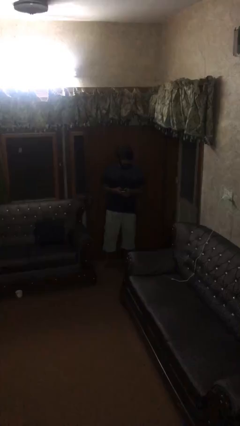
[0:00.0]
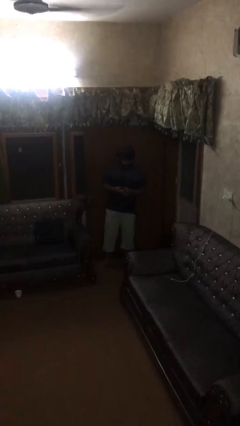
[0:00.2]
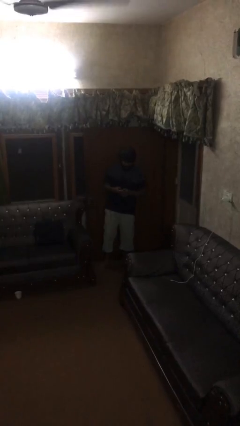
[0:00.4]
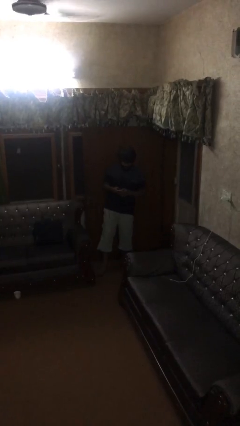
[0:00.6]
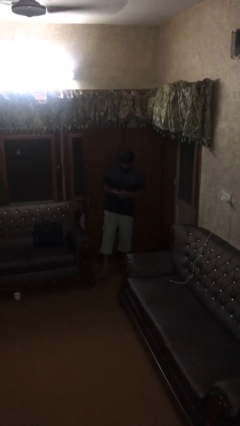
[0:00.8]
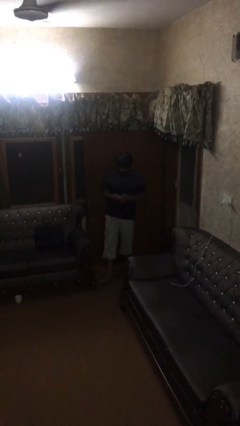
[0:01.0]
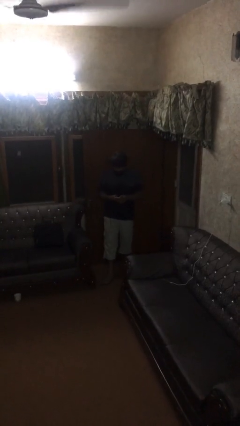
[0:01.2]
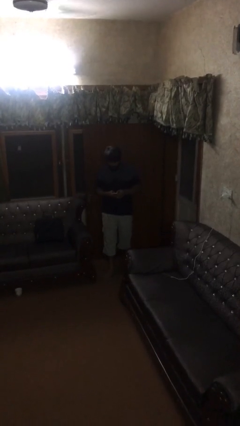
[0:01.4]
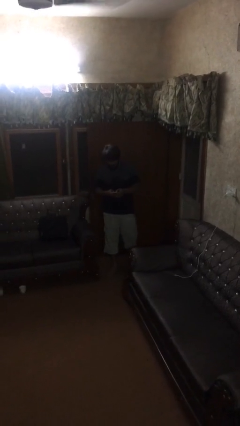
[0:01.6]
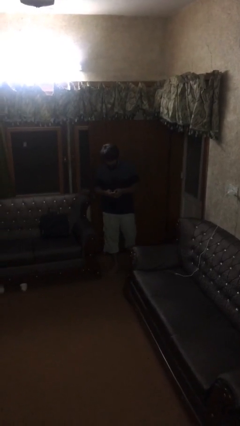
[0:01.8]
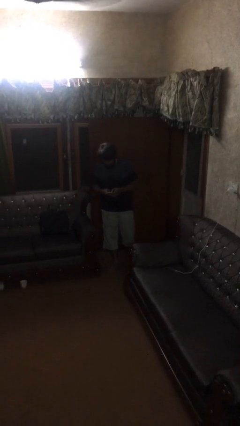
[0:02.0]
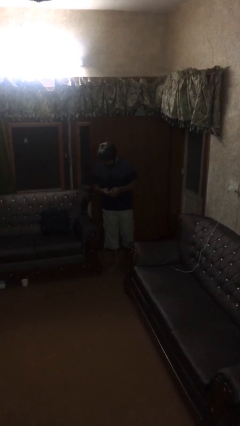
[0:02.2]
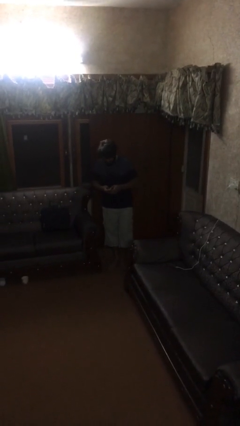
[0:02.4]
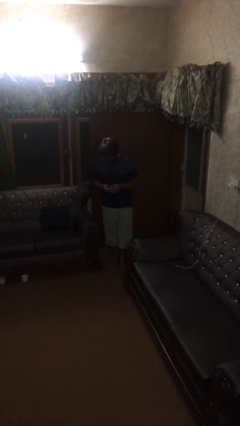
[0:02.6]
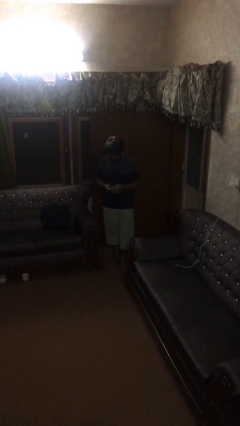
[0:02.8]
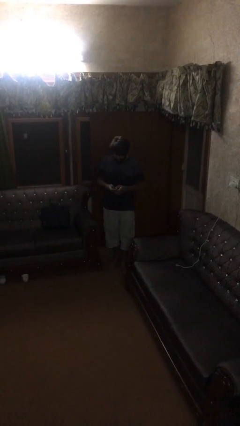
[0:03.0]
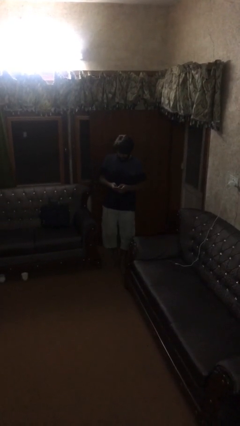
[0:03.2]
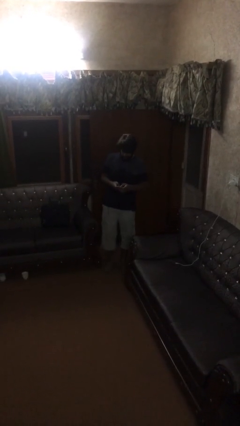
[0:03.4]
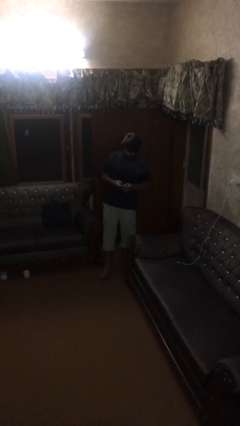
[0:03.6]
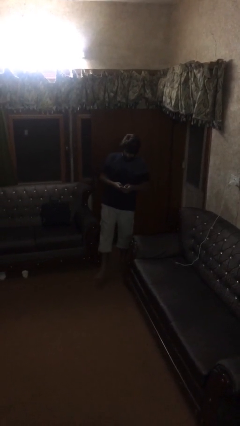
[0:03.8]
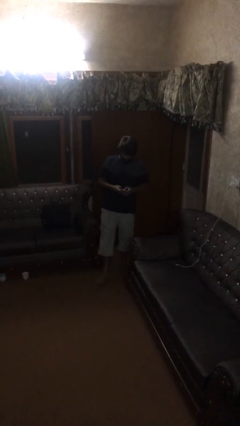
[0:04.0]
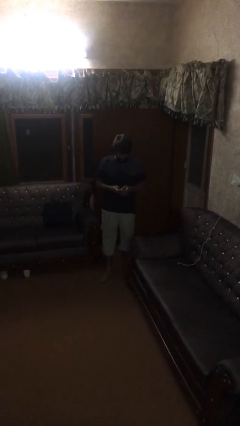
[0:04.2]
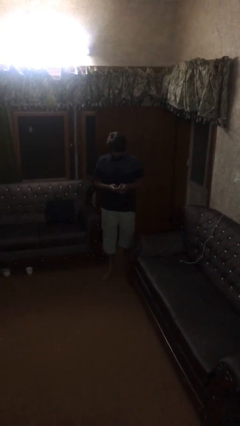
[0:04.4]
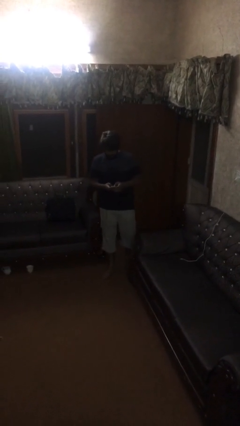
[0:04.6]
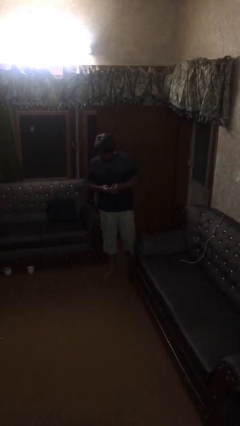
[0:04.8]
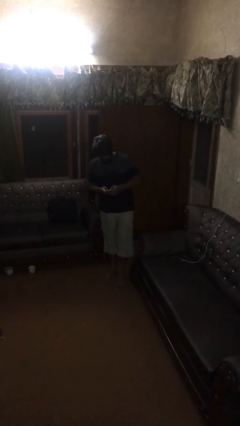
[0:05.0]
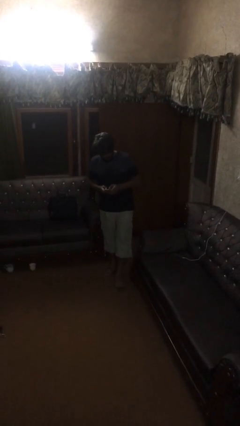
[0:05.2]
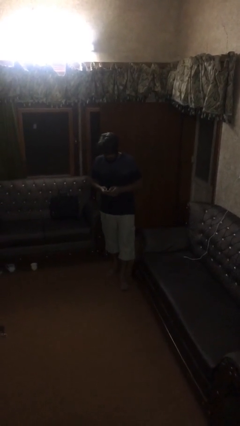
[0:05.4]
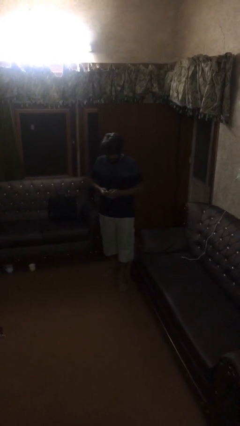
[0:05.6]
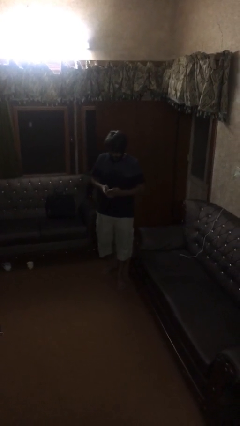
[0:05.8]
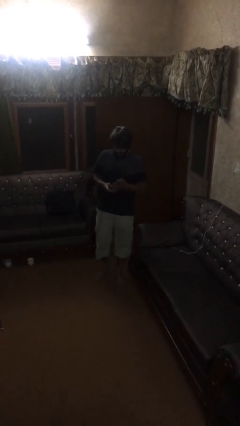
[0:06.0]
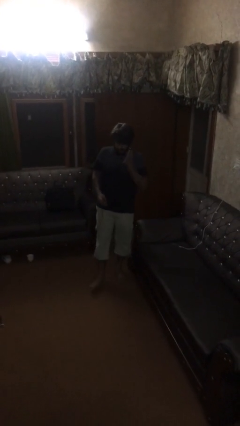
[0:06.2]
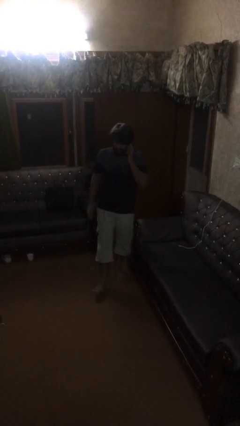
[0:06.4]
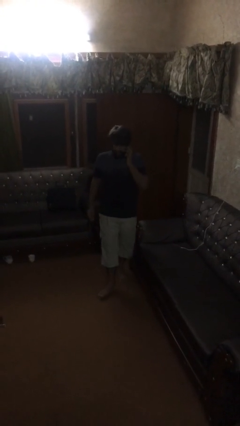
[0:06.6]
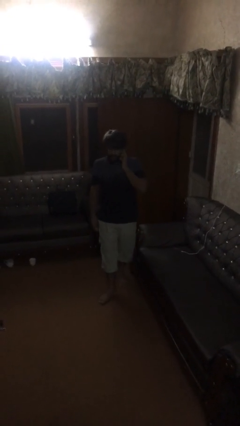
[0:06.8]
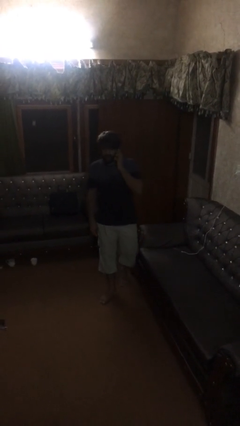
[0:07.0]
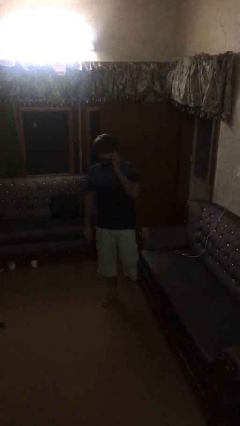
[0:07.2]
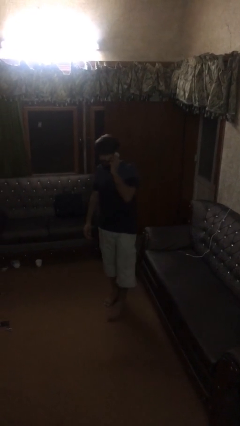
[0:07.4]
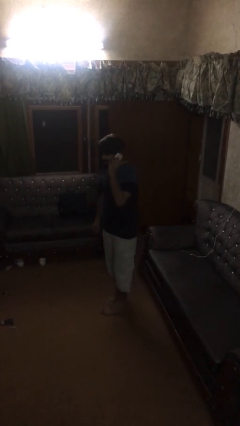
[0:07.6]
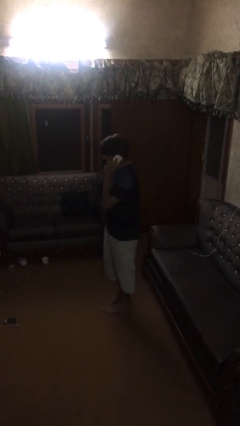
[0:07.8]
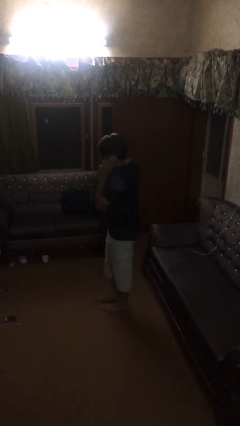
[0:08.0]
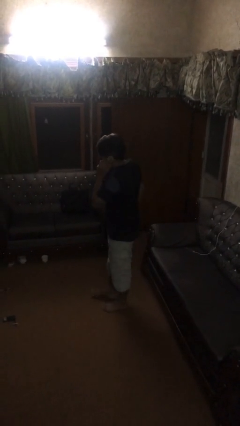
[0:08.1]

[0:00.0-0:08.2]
person texts on phone

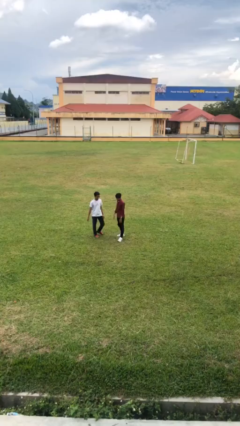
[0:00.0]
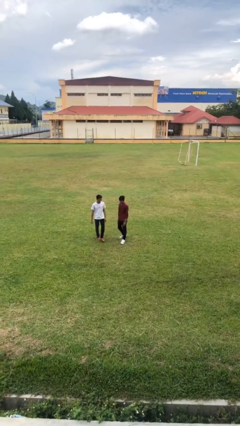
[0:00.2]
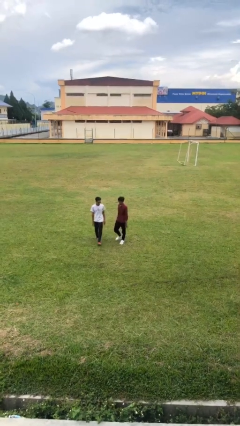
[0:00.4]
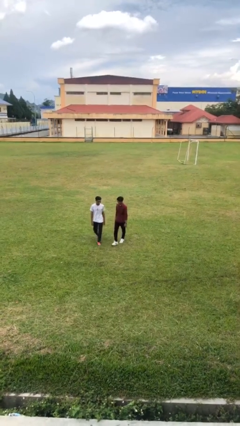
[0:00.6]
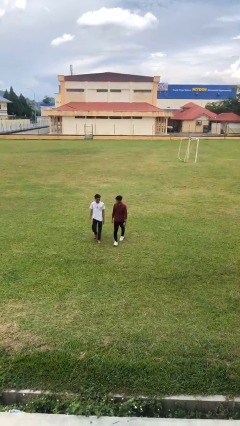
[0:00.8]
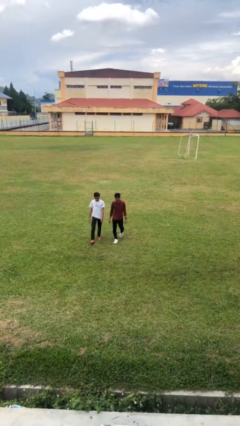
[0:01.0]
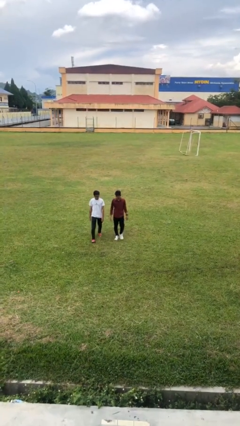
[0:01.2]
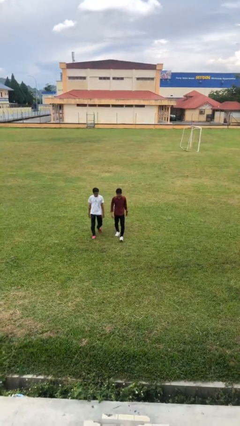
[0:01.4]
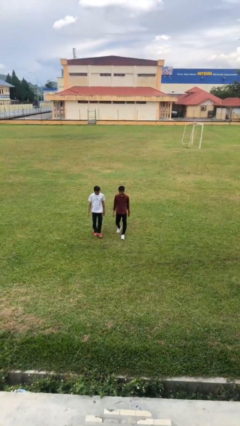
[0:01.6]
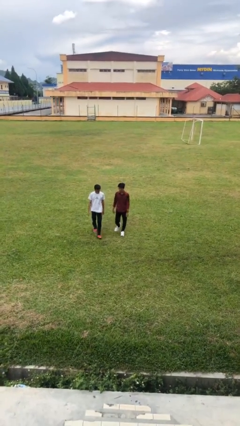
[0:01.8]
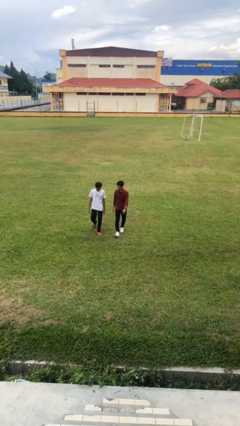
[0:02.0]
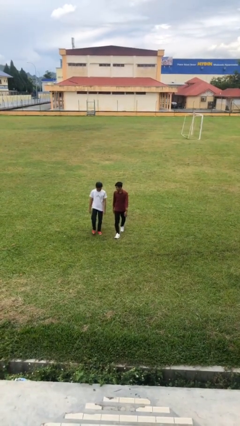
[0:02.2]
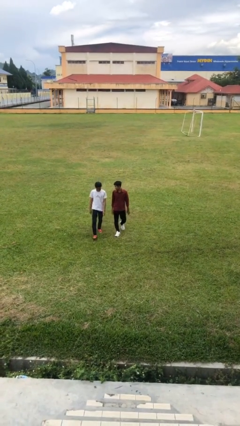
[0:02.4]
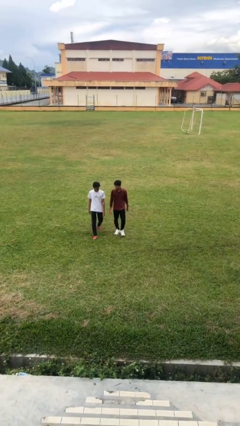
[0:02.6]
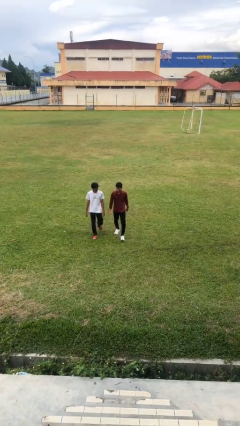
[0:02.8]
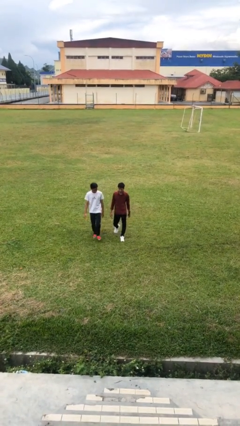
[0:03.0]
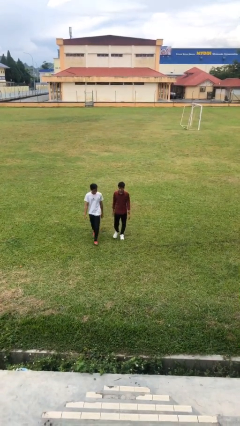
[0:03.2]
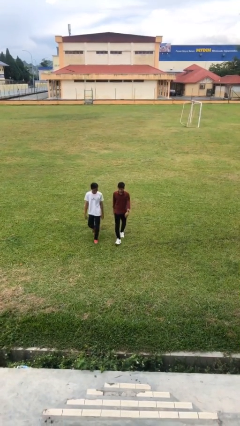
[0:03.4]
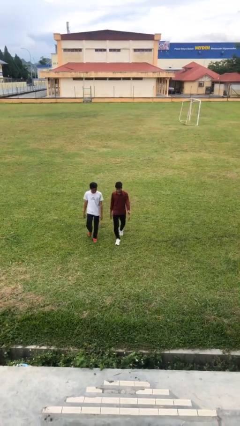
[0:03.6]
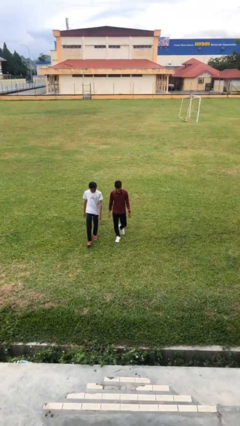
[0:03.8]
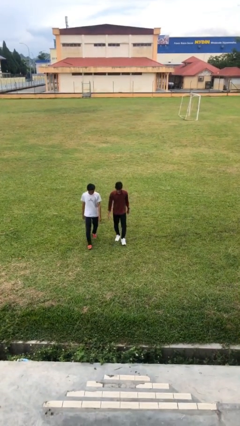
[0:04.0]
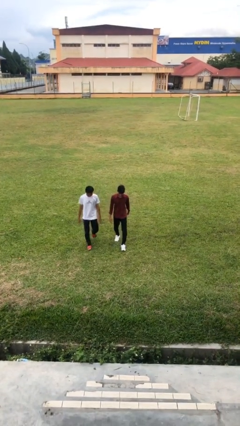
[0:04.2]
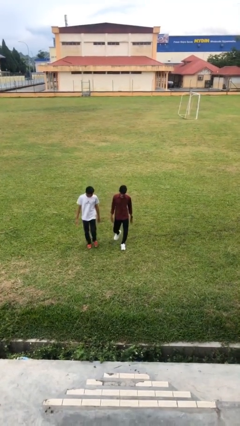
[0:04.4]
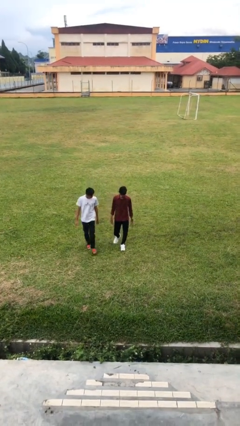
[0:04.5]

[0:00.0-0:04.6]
person talks to person

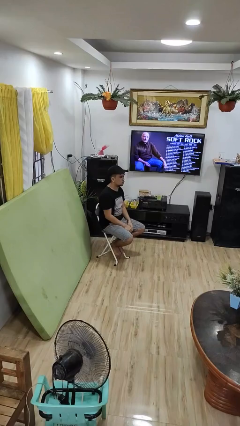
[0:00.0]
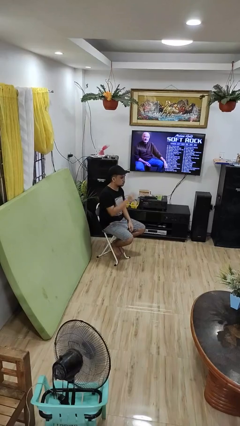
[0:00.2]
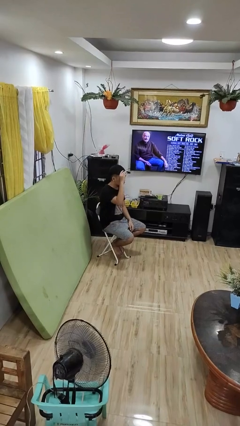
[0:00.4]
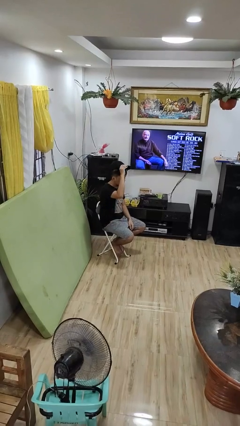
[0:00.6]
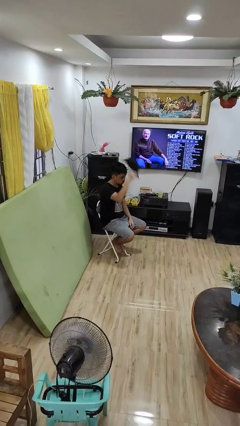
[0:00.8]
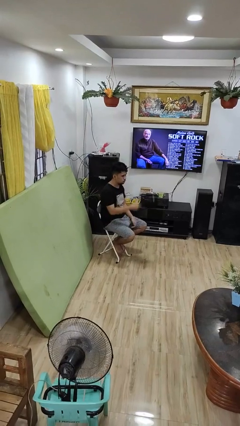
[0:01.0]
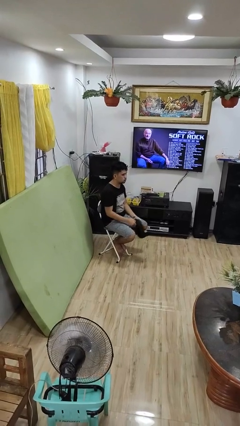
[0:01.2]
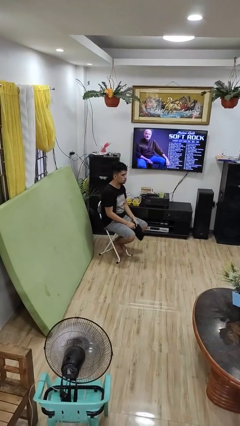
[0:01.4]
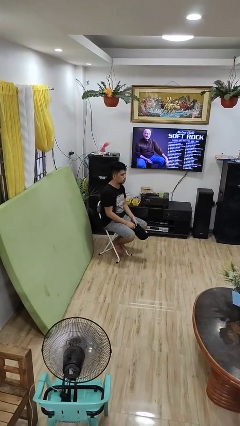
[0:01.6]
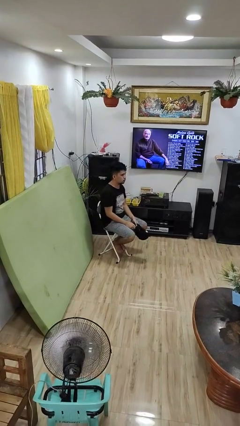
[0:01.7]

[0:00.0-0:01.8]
person takes off hat

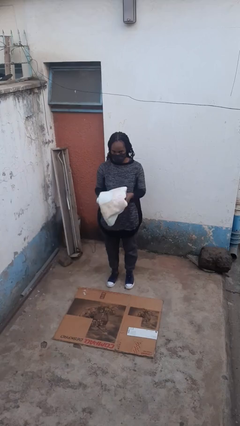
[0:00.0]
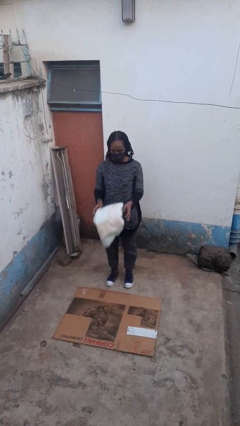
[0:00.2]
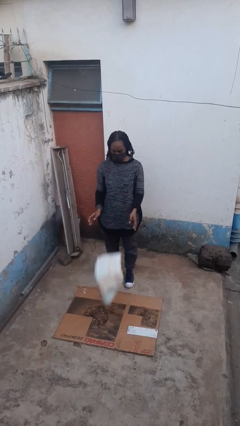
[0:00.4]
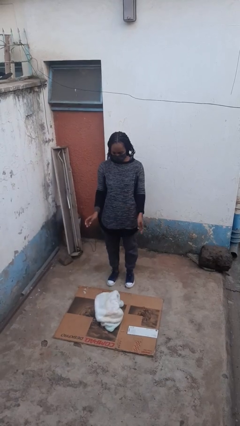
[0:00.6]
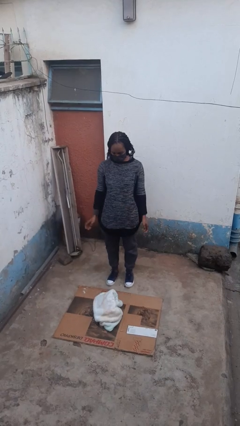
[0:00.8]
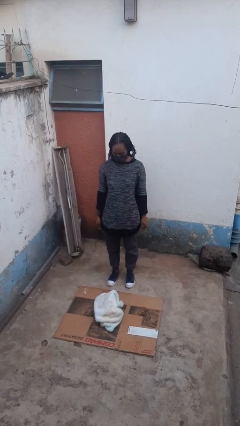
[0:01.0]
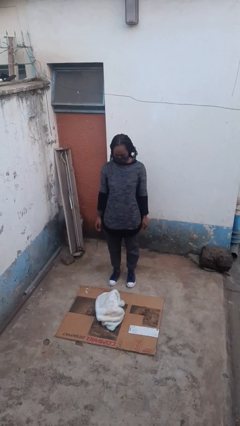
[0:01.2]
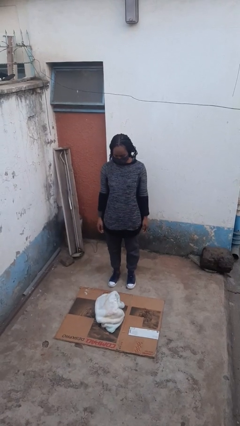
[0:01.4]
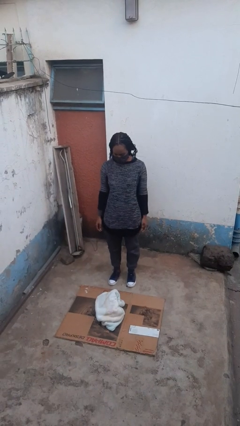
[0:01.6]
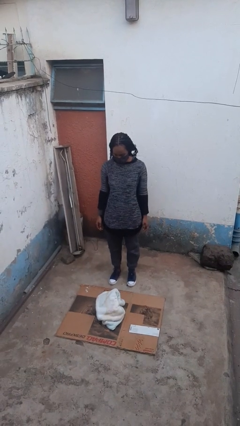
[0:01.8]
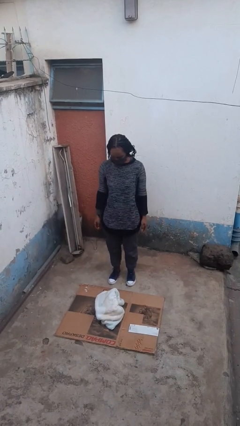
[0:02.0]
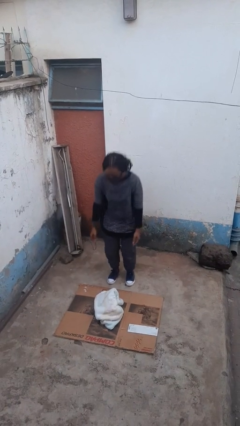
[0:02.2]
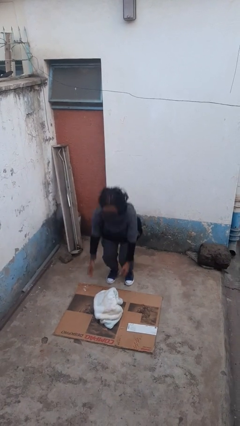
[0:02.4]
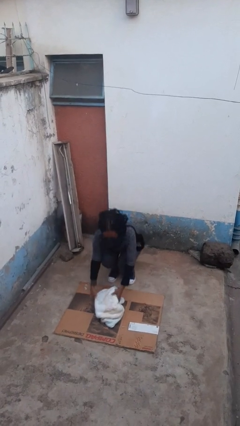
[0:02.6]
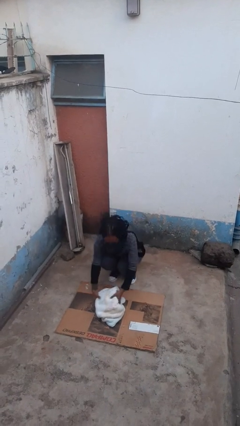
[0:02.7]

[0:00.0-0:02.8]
person drops object

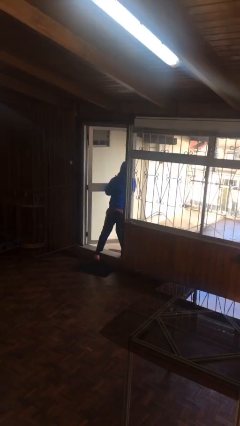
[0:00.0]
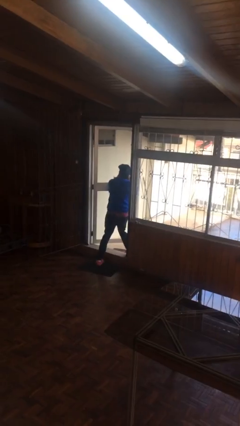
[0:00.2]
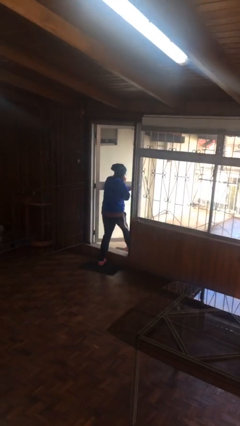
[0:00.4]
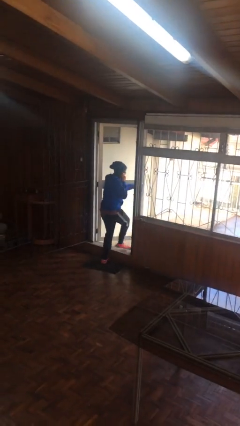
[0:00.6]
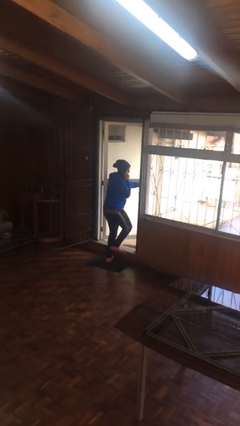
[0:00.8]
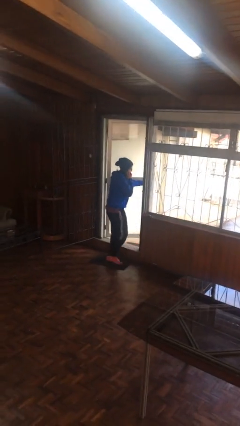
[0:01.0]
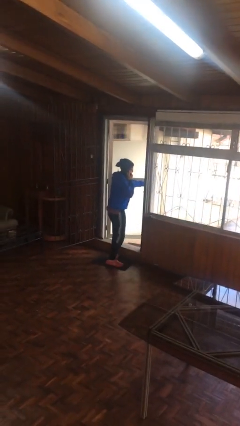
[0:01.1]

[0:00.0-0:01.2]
person enters scene through structure
